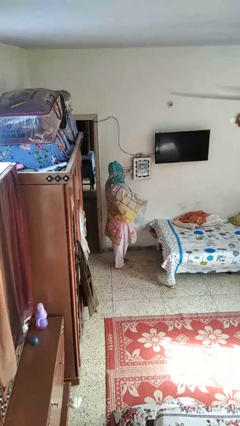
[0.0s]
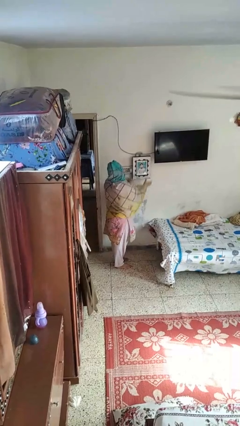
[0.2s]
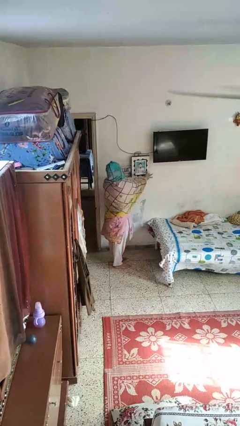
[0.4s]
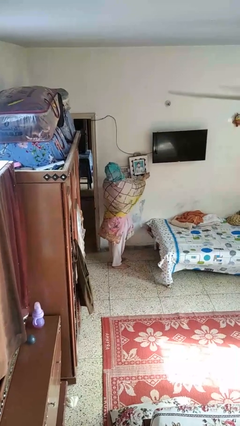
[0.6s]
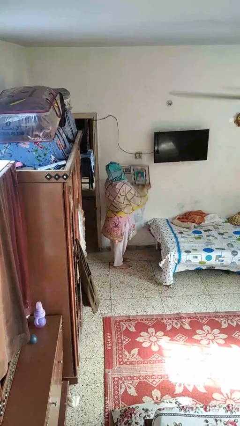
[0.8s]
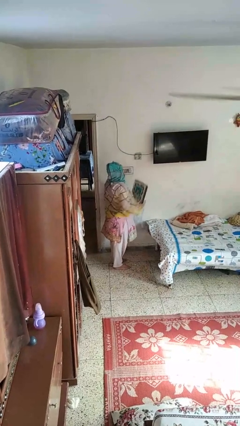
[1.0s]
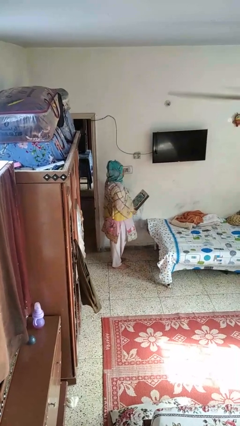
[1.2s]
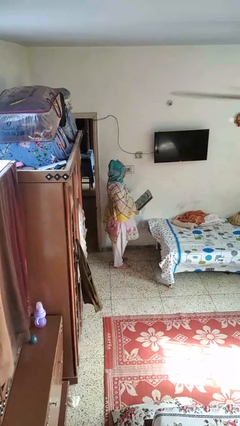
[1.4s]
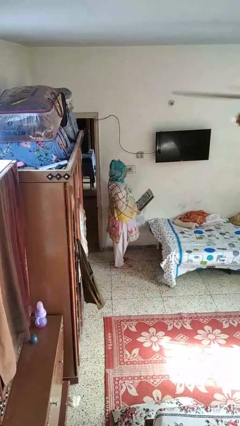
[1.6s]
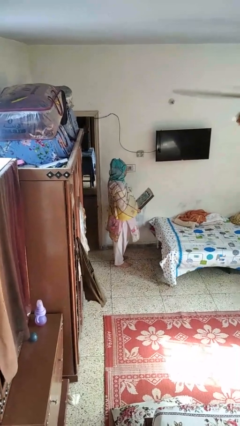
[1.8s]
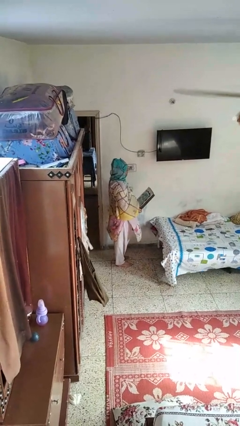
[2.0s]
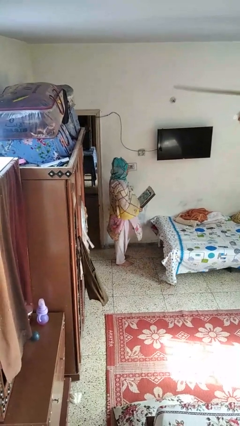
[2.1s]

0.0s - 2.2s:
person takes down picture frame

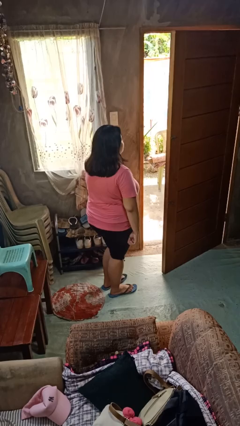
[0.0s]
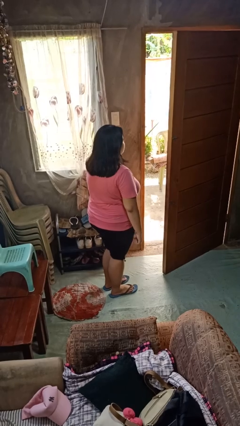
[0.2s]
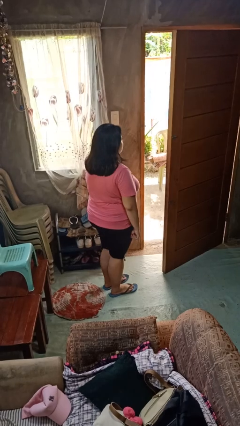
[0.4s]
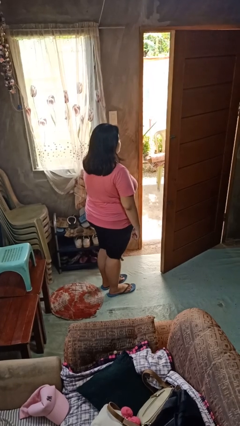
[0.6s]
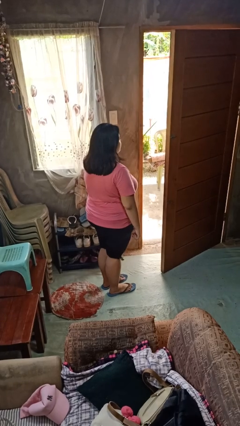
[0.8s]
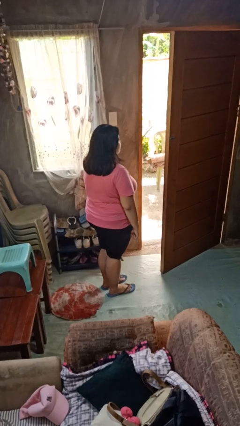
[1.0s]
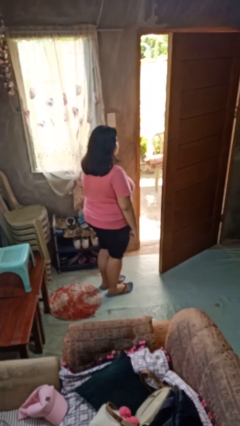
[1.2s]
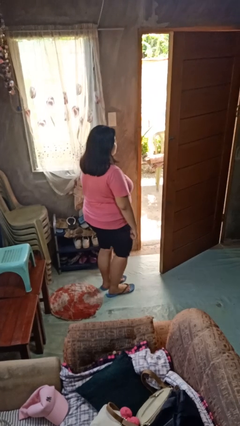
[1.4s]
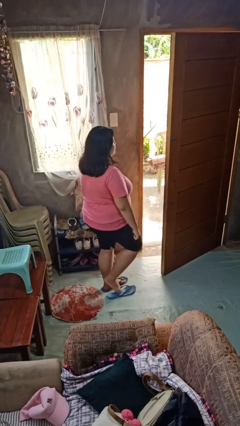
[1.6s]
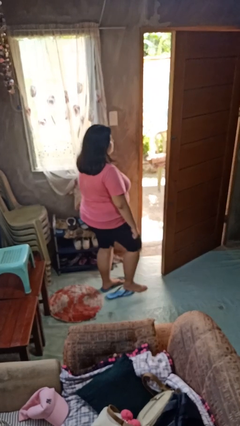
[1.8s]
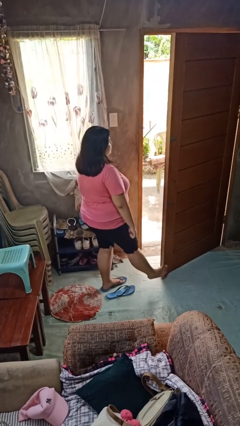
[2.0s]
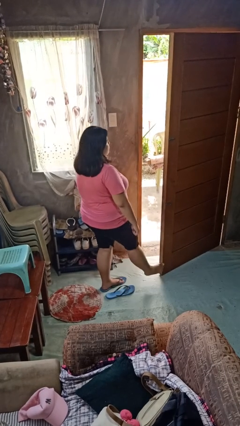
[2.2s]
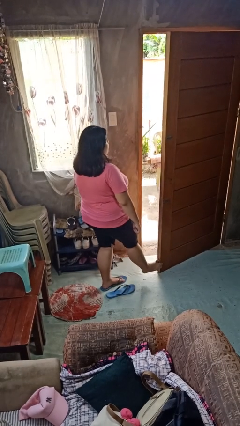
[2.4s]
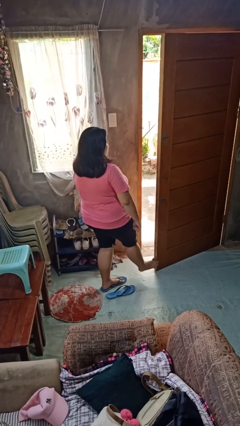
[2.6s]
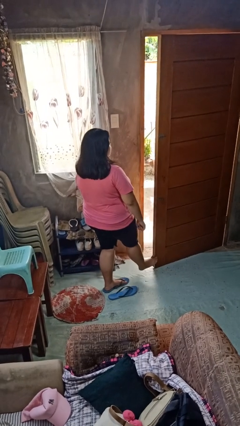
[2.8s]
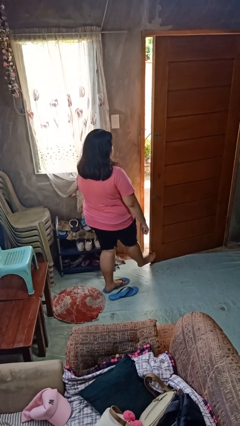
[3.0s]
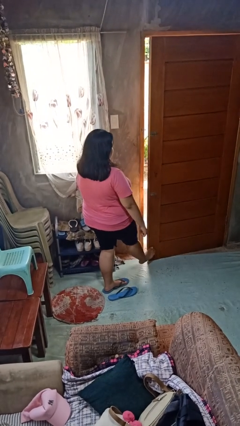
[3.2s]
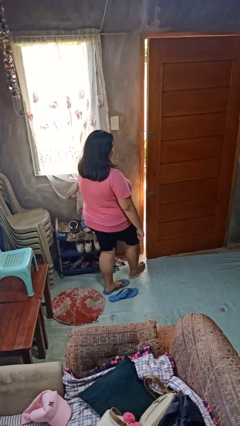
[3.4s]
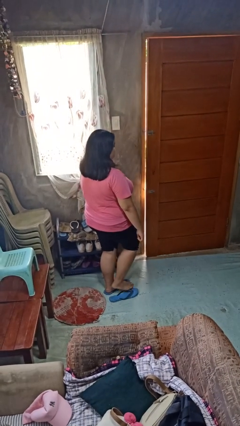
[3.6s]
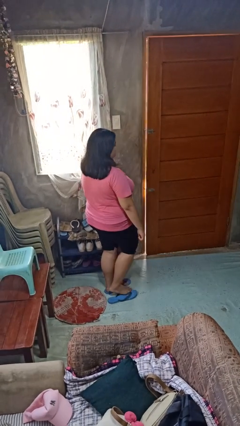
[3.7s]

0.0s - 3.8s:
person closes door with foot

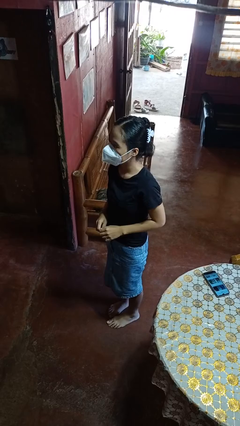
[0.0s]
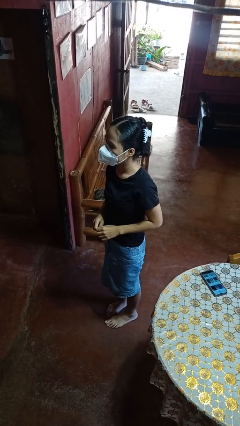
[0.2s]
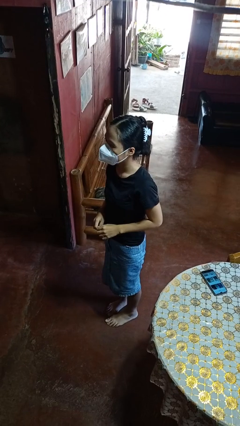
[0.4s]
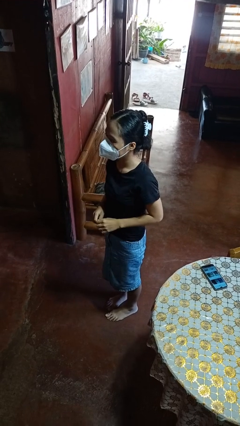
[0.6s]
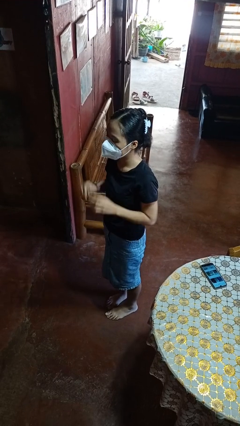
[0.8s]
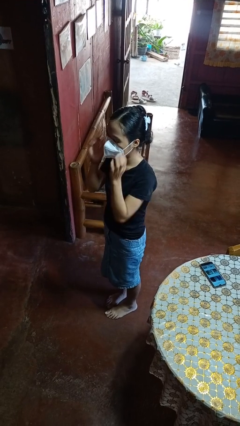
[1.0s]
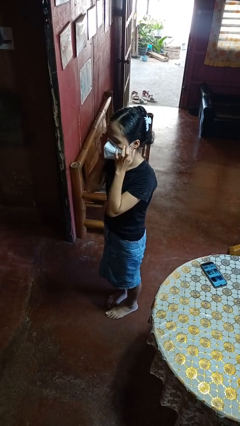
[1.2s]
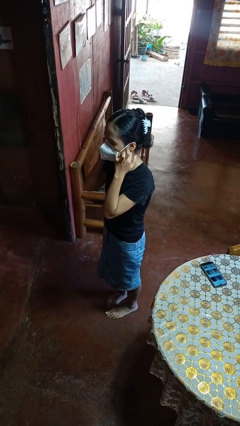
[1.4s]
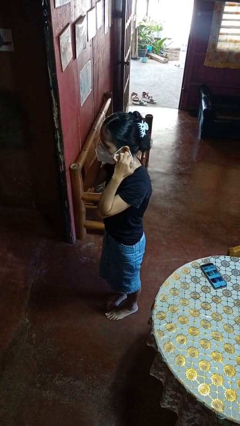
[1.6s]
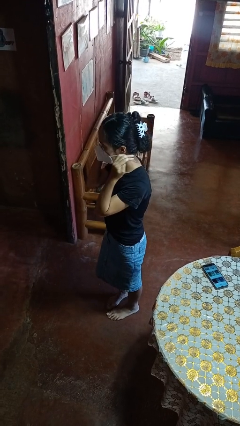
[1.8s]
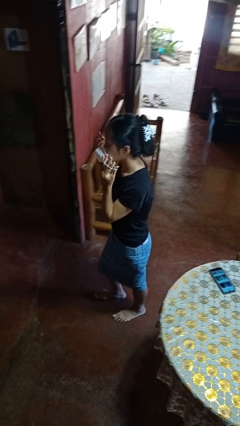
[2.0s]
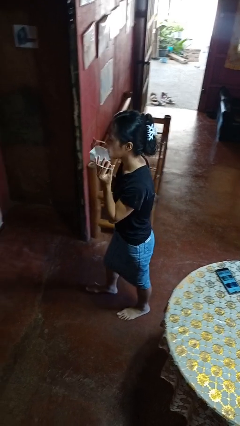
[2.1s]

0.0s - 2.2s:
person puts on facemask

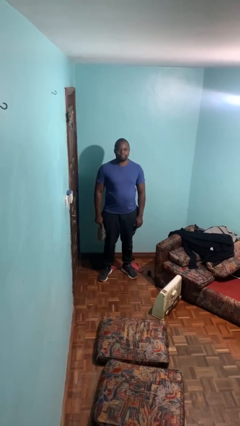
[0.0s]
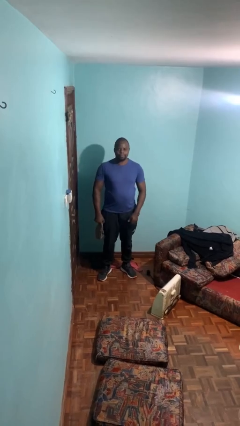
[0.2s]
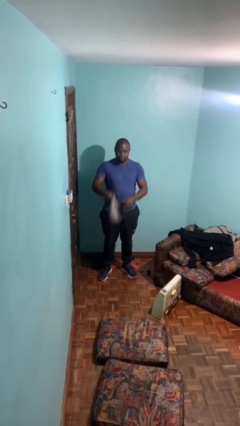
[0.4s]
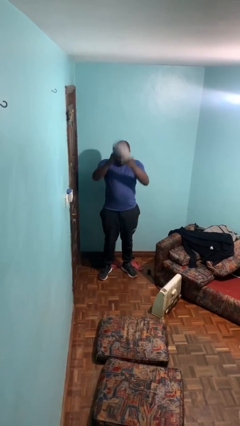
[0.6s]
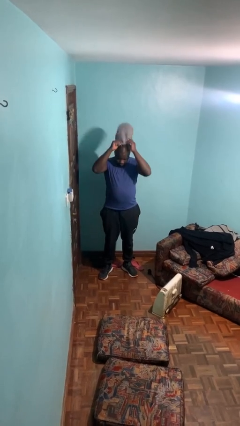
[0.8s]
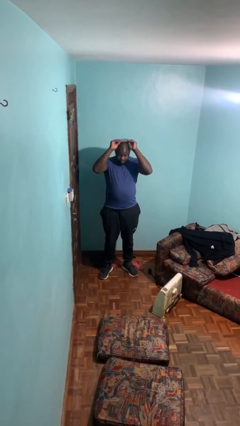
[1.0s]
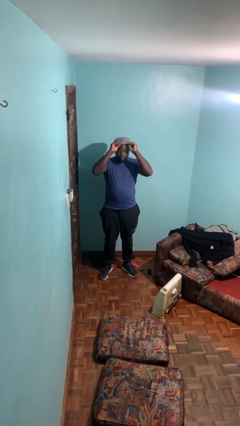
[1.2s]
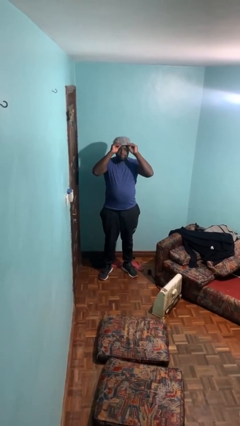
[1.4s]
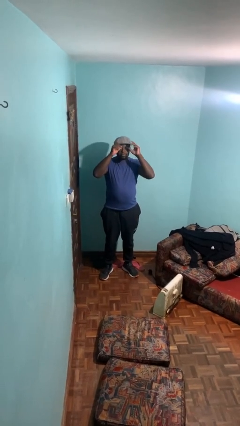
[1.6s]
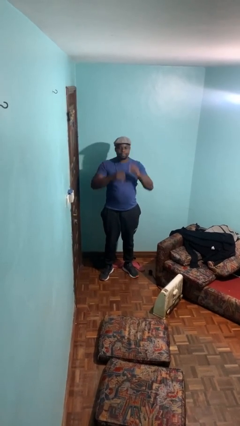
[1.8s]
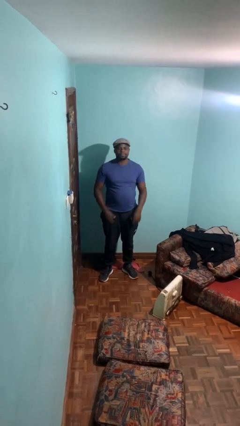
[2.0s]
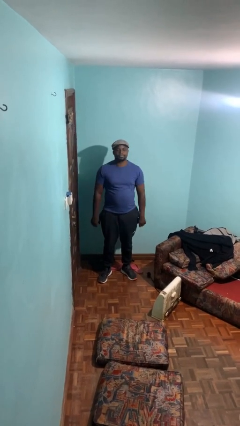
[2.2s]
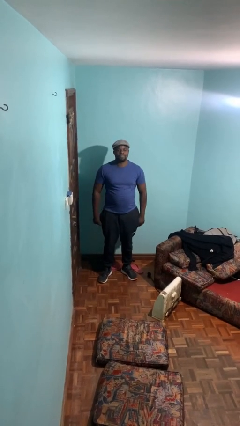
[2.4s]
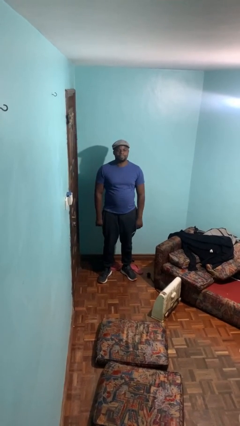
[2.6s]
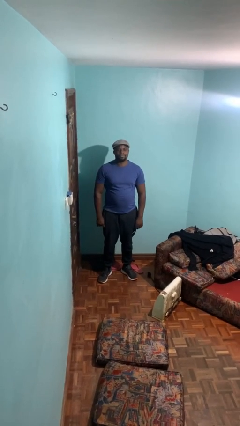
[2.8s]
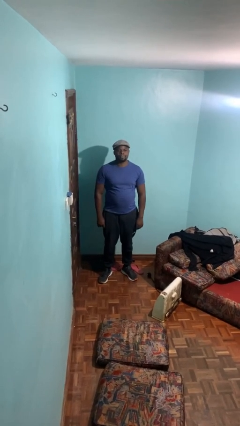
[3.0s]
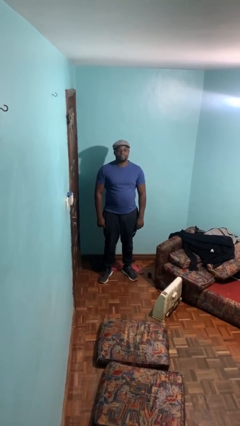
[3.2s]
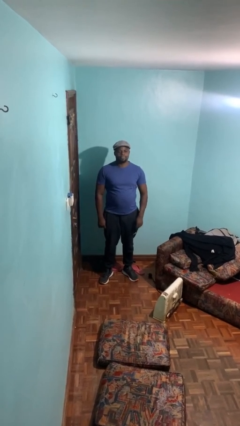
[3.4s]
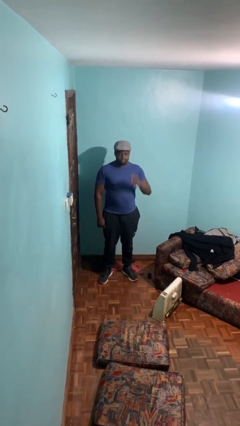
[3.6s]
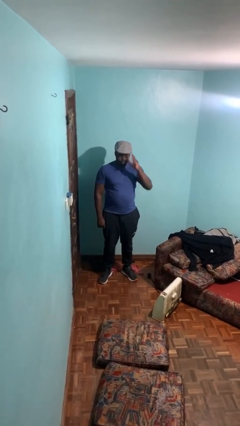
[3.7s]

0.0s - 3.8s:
person puts on hat

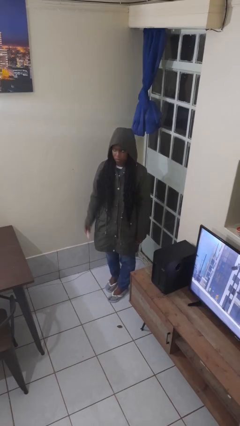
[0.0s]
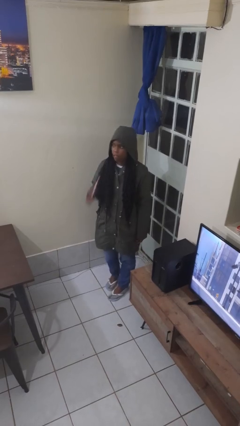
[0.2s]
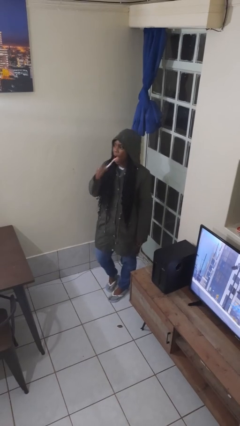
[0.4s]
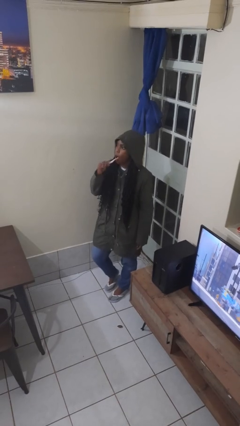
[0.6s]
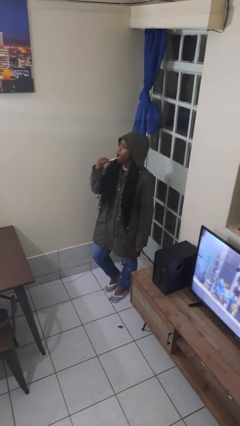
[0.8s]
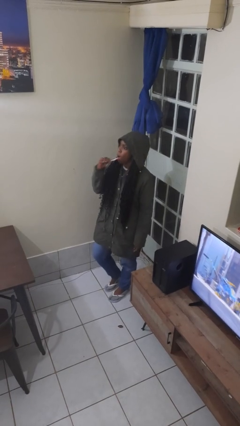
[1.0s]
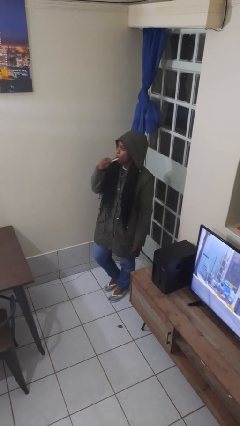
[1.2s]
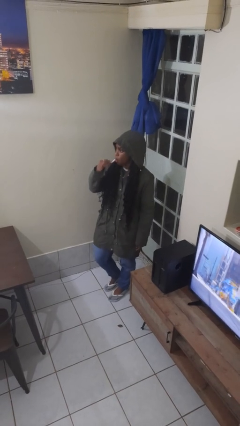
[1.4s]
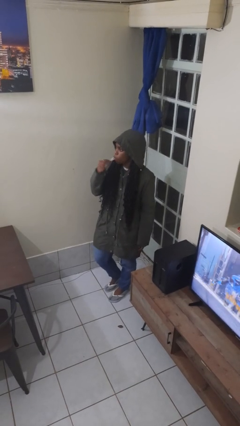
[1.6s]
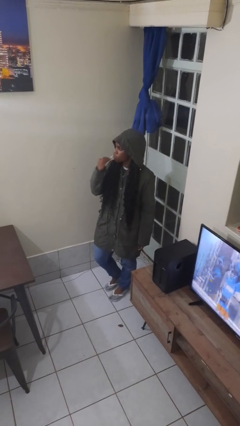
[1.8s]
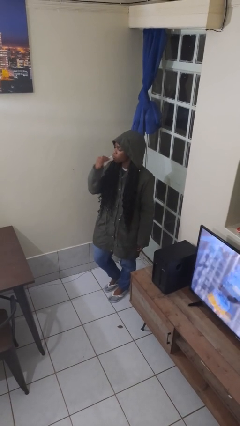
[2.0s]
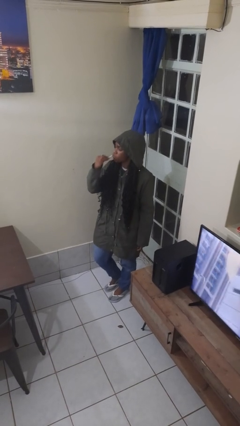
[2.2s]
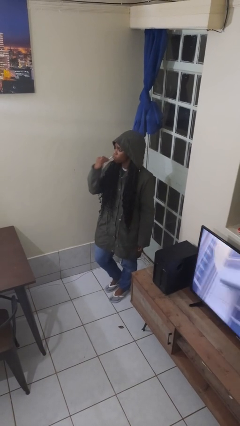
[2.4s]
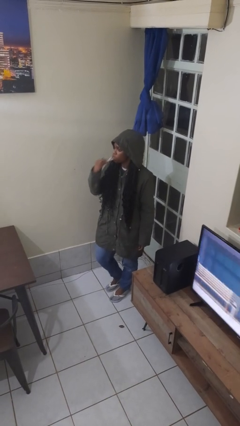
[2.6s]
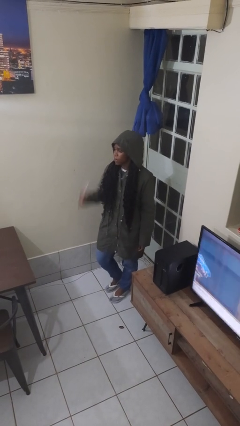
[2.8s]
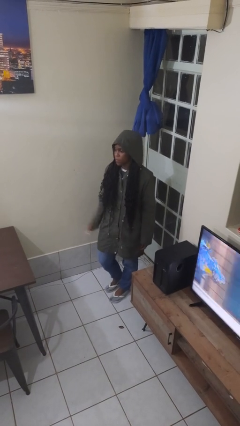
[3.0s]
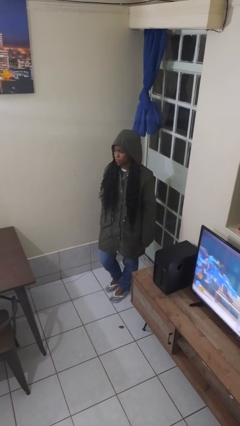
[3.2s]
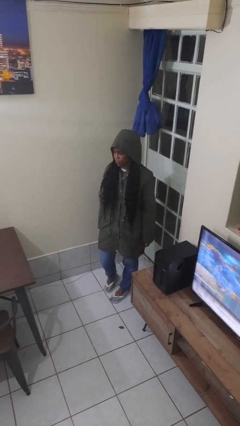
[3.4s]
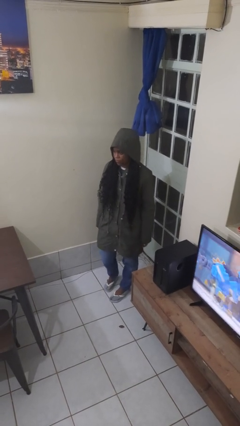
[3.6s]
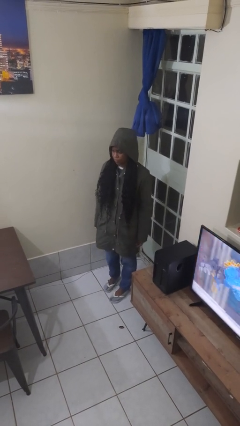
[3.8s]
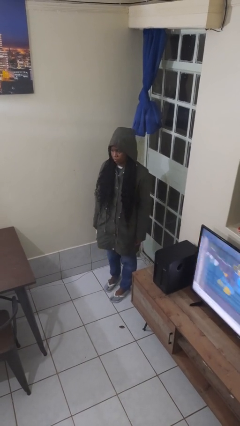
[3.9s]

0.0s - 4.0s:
person brushes teeth

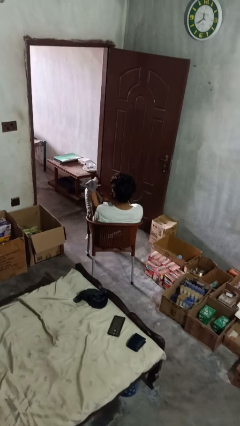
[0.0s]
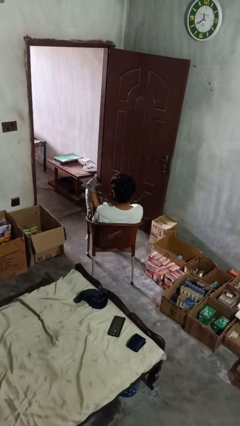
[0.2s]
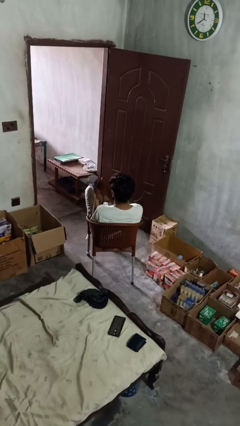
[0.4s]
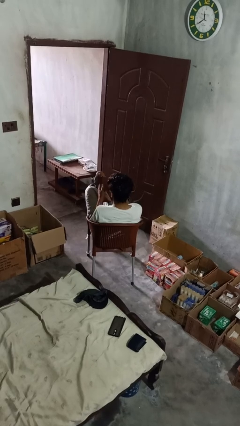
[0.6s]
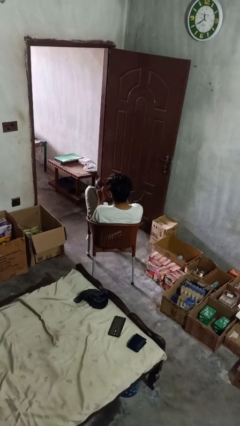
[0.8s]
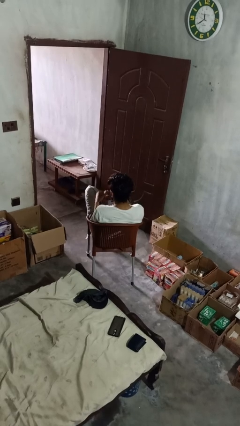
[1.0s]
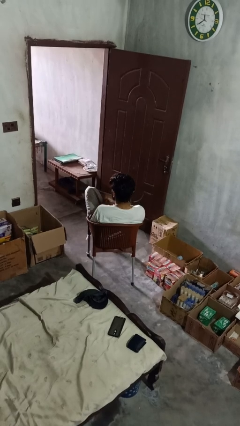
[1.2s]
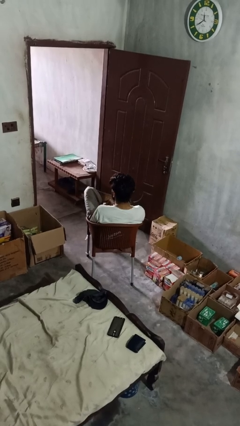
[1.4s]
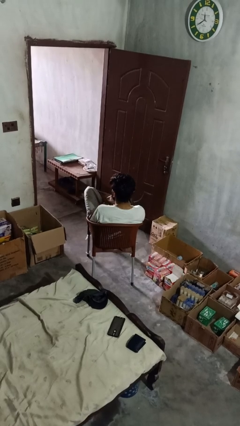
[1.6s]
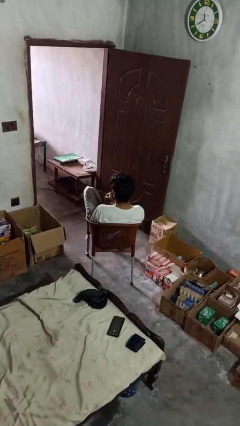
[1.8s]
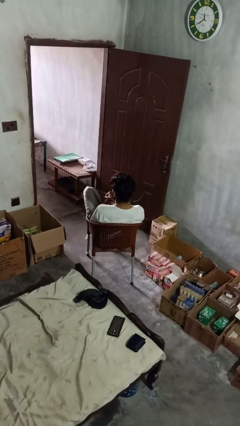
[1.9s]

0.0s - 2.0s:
person takes off gloves
